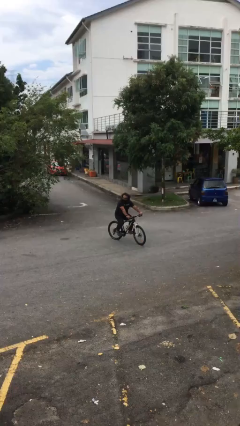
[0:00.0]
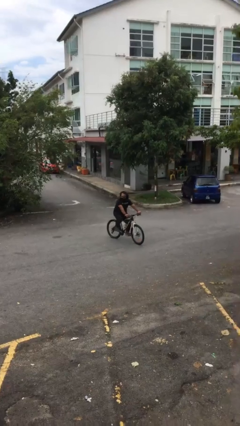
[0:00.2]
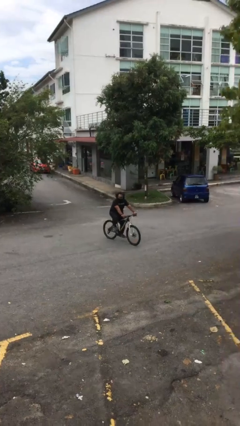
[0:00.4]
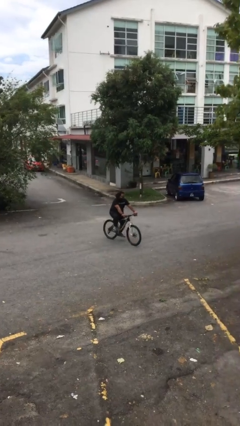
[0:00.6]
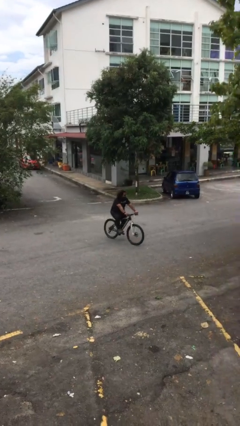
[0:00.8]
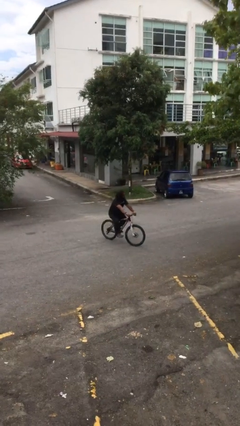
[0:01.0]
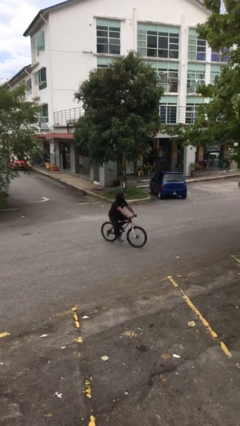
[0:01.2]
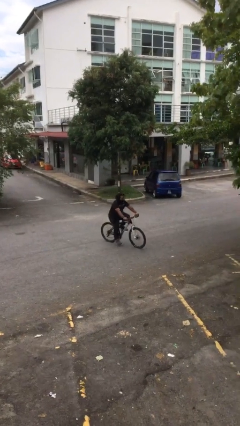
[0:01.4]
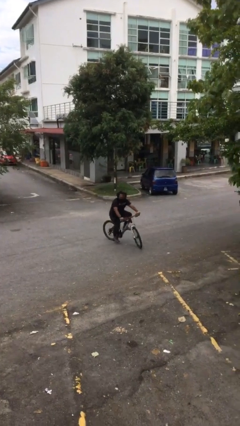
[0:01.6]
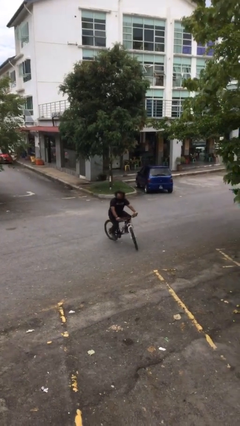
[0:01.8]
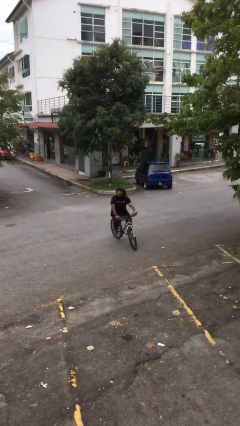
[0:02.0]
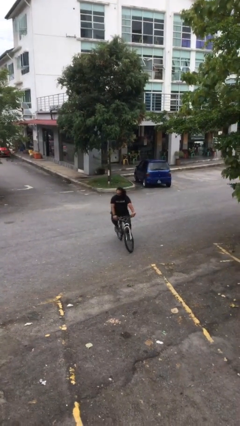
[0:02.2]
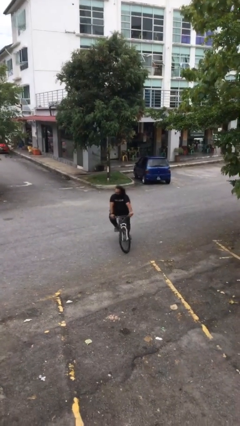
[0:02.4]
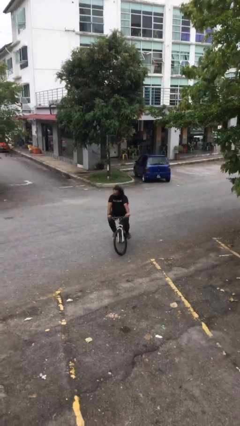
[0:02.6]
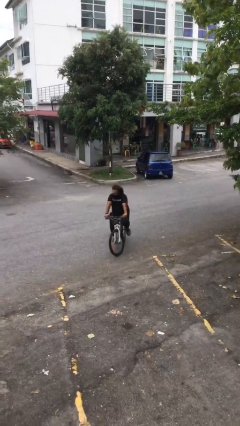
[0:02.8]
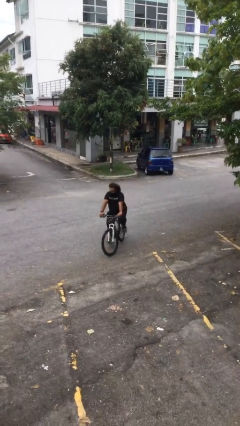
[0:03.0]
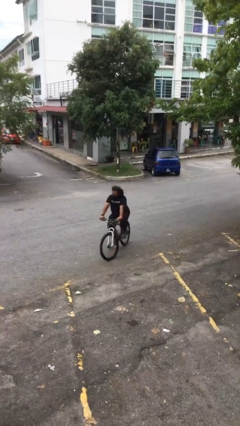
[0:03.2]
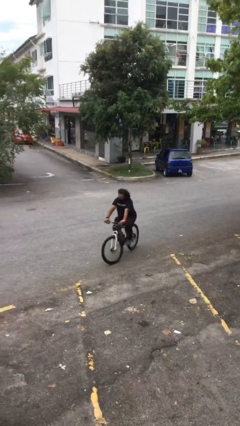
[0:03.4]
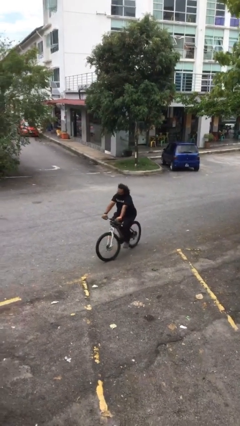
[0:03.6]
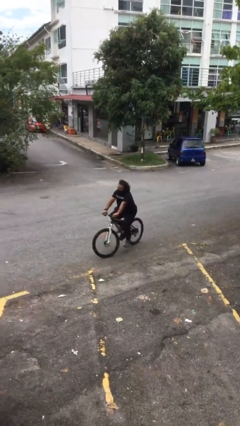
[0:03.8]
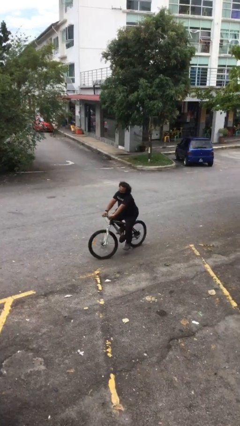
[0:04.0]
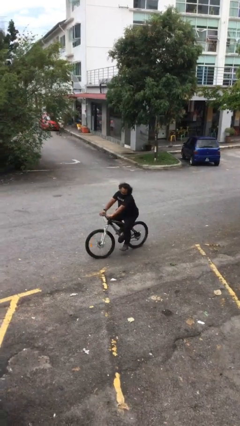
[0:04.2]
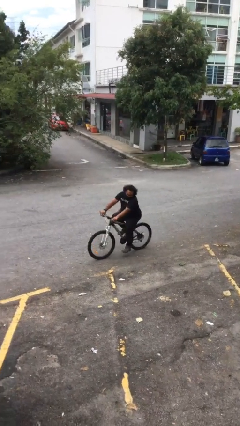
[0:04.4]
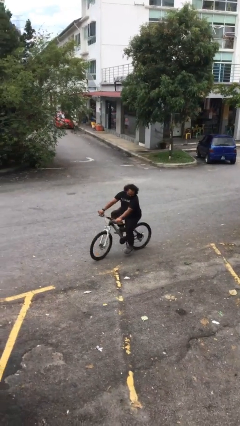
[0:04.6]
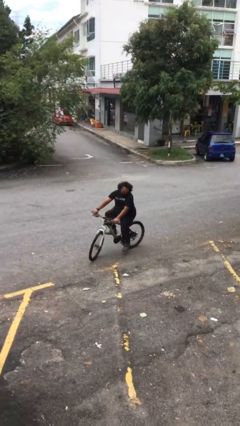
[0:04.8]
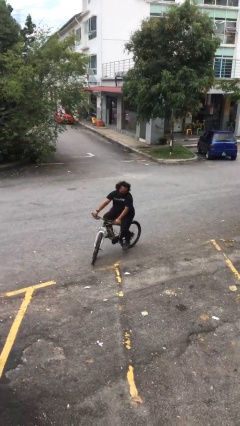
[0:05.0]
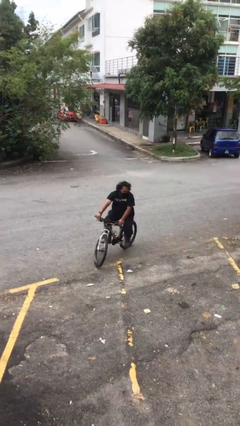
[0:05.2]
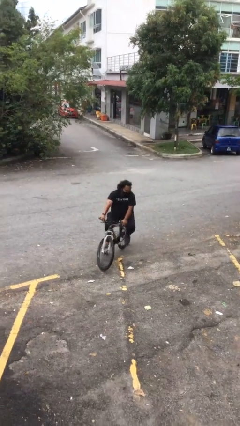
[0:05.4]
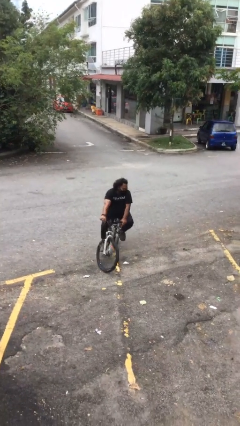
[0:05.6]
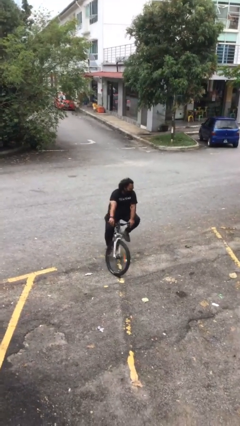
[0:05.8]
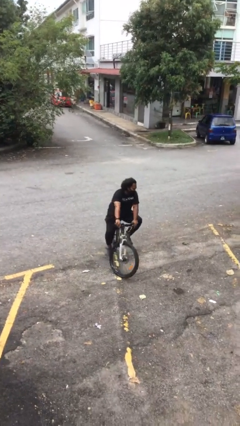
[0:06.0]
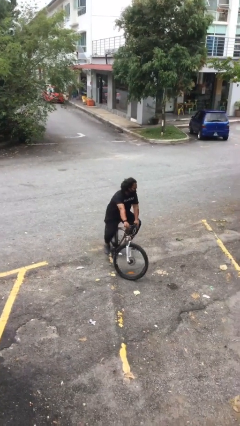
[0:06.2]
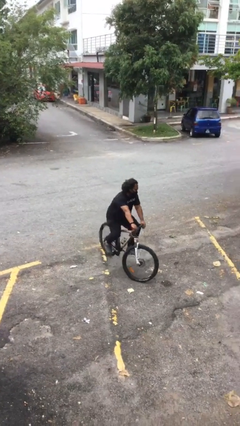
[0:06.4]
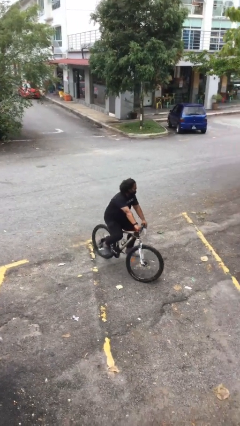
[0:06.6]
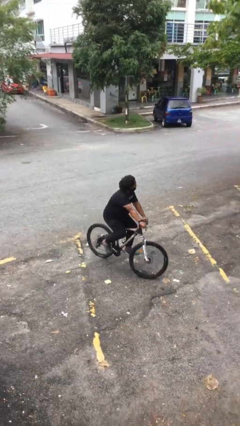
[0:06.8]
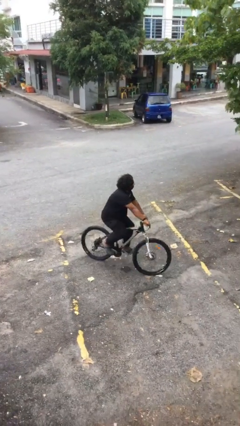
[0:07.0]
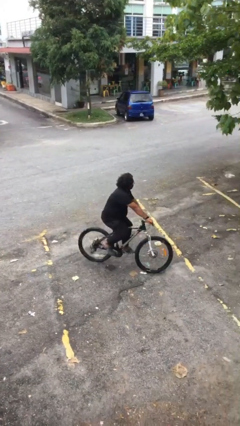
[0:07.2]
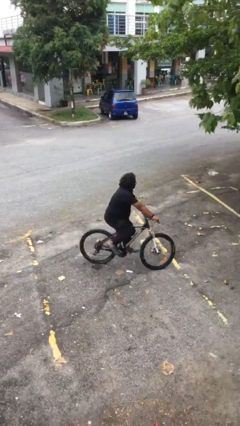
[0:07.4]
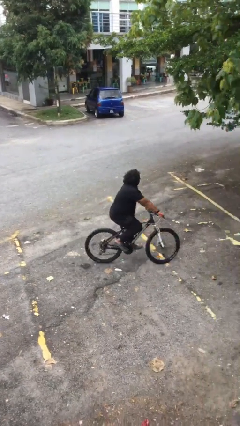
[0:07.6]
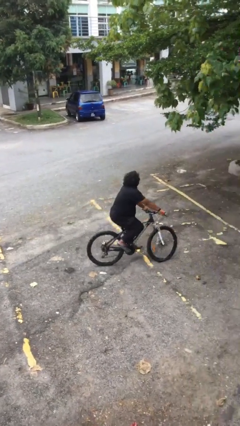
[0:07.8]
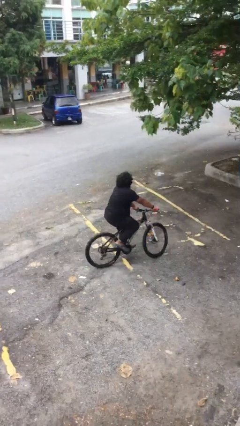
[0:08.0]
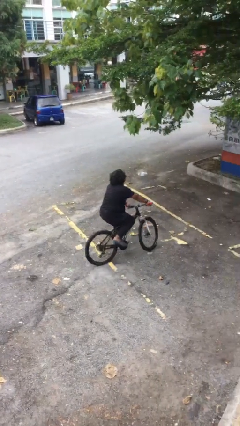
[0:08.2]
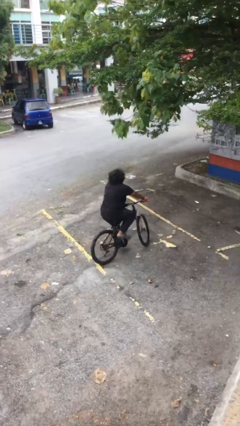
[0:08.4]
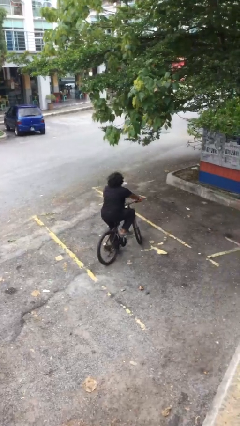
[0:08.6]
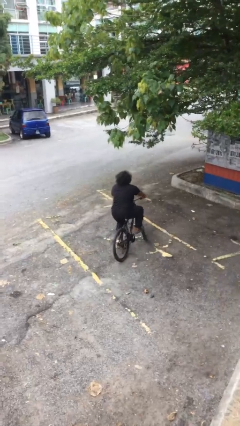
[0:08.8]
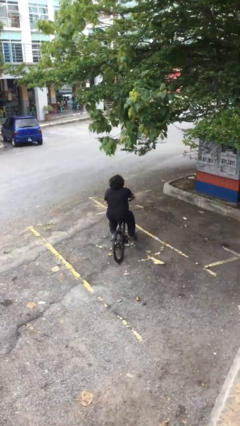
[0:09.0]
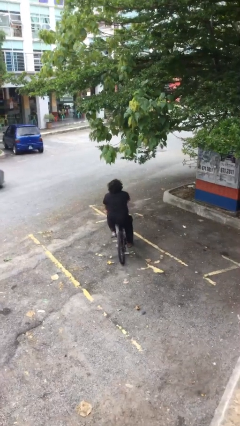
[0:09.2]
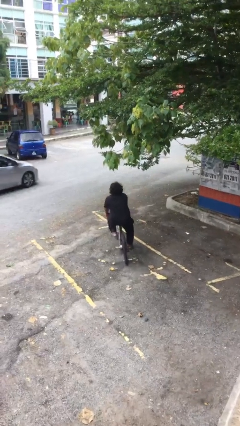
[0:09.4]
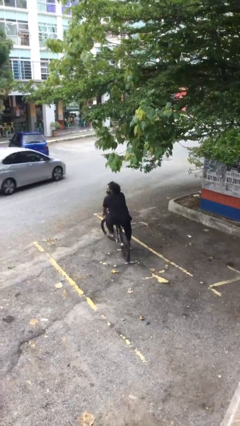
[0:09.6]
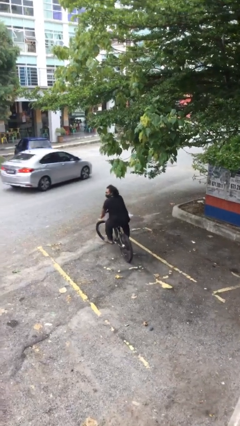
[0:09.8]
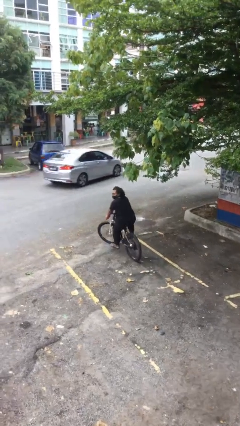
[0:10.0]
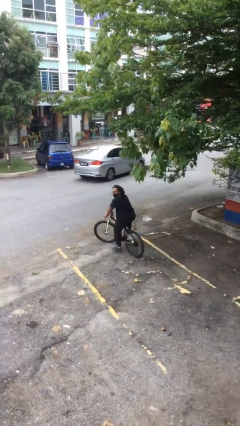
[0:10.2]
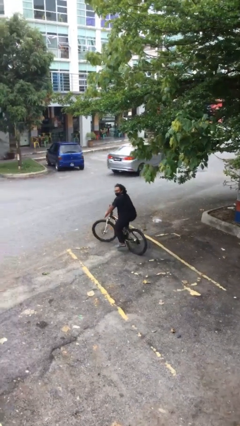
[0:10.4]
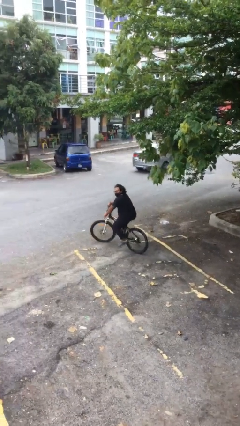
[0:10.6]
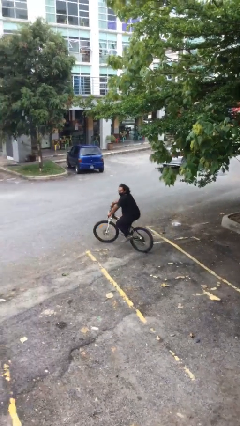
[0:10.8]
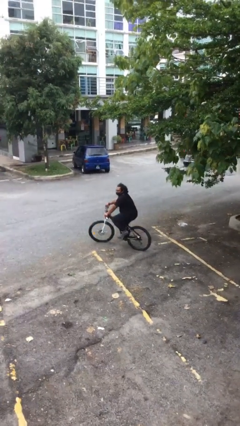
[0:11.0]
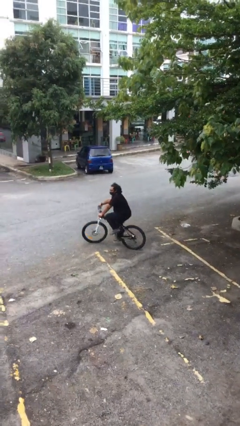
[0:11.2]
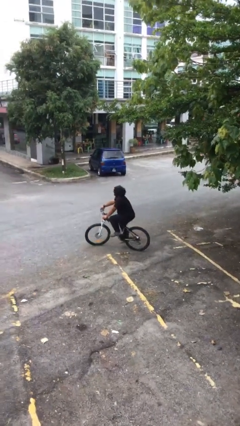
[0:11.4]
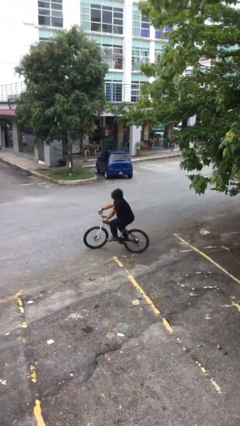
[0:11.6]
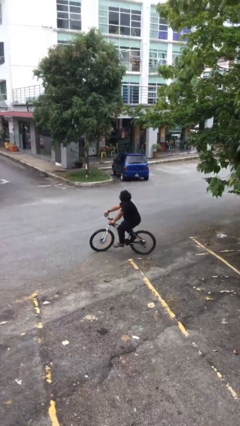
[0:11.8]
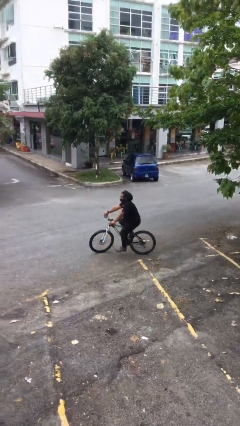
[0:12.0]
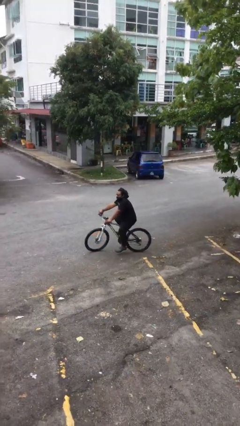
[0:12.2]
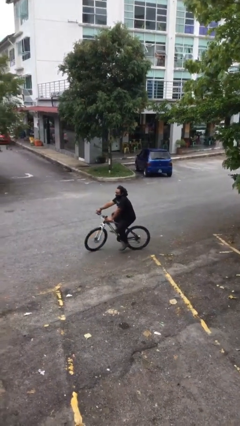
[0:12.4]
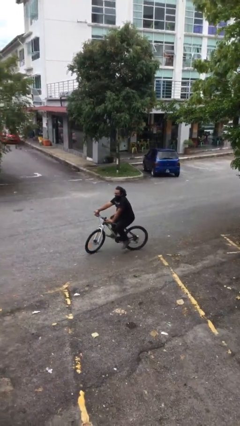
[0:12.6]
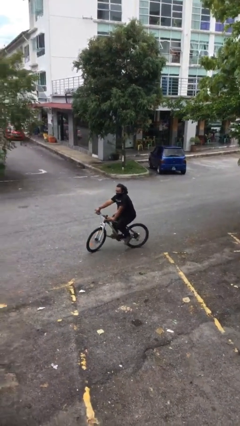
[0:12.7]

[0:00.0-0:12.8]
person rides bicycle

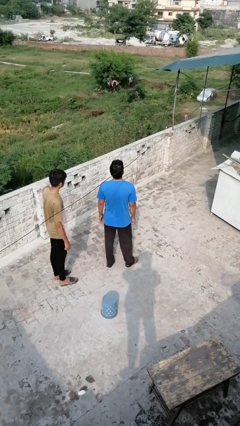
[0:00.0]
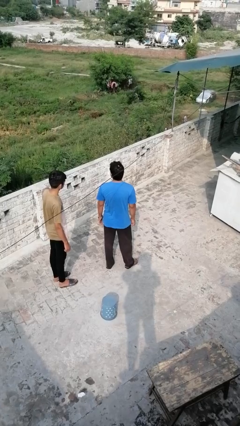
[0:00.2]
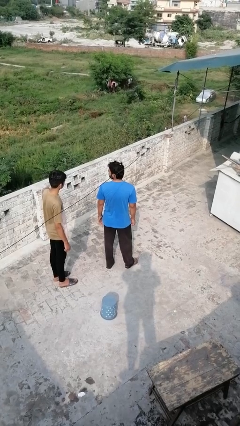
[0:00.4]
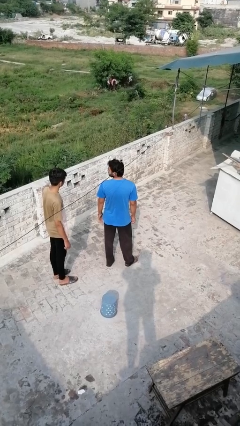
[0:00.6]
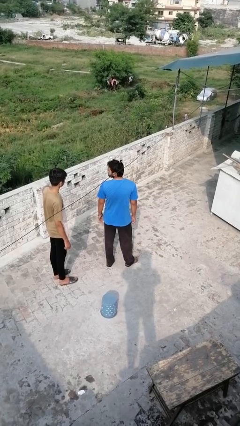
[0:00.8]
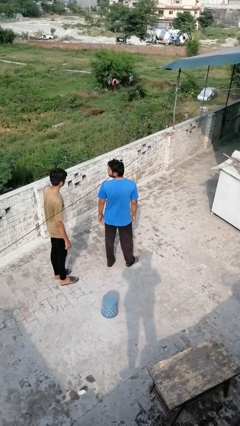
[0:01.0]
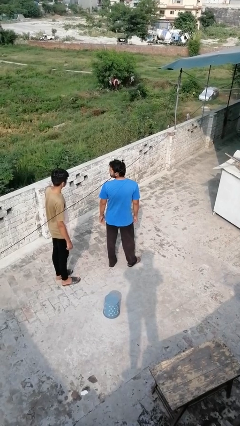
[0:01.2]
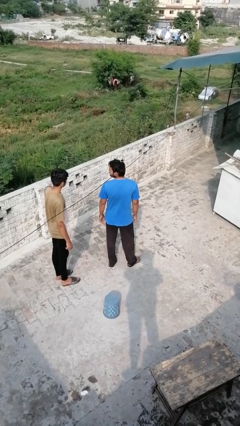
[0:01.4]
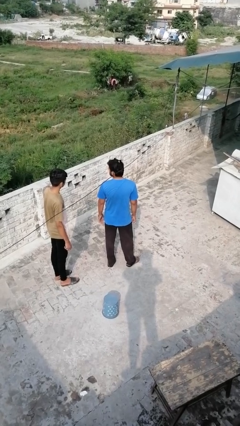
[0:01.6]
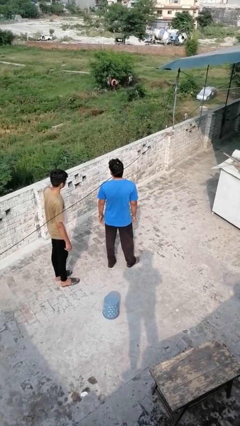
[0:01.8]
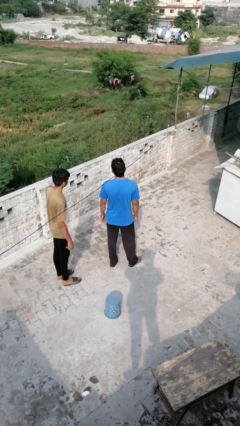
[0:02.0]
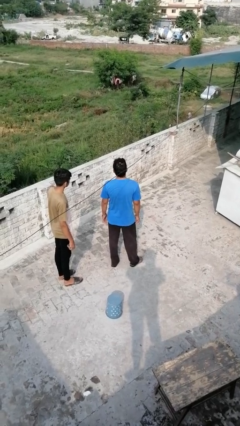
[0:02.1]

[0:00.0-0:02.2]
person looks over shoulder

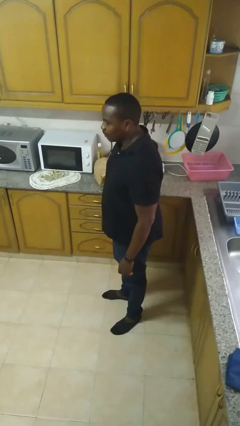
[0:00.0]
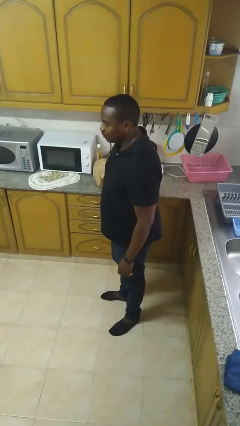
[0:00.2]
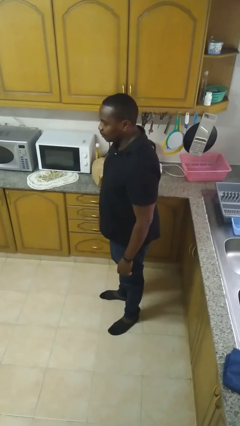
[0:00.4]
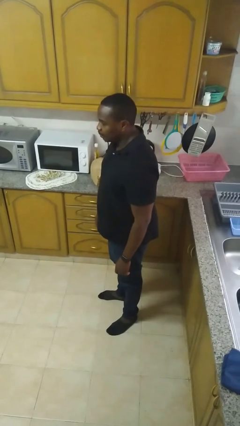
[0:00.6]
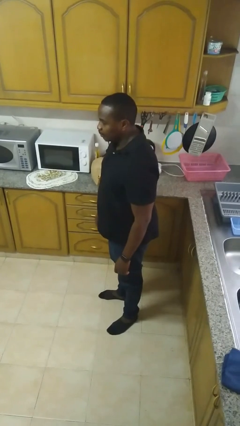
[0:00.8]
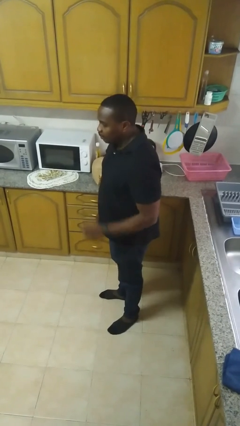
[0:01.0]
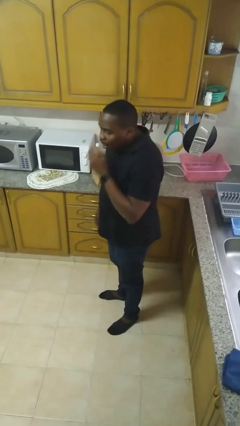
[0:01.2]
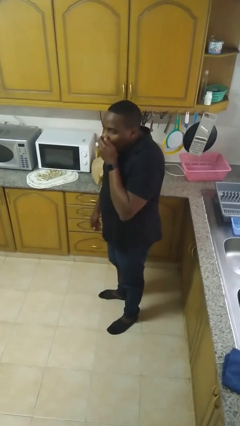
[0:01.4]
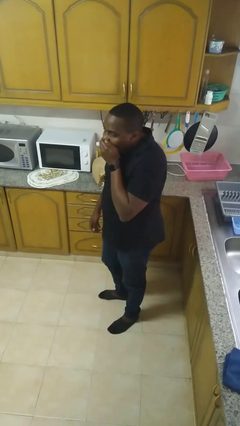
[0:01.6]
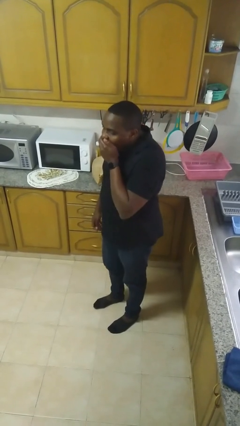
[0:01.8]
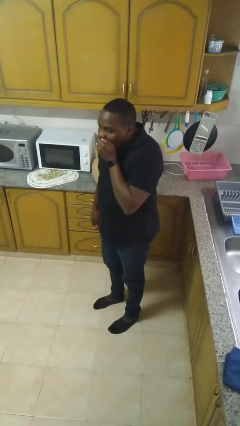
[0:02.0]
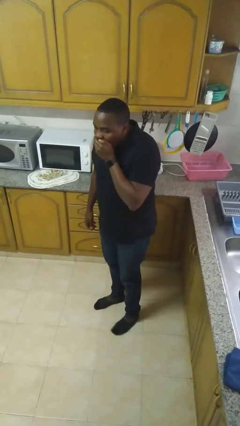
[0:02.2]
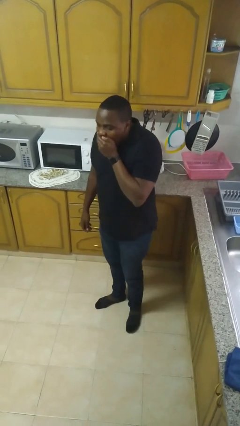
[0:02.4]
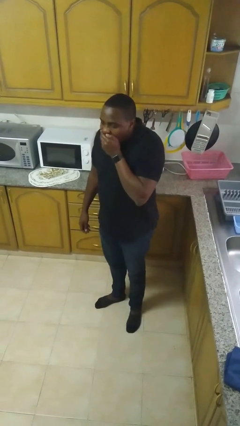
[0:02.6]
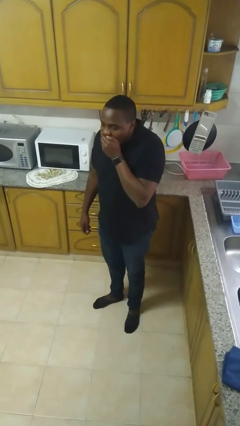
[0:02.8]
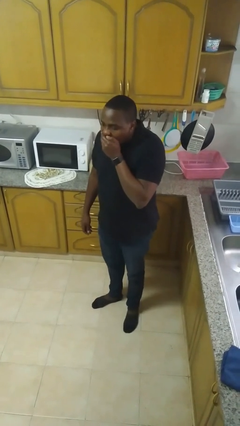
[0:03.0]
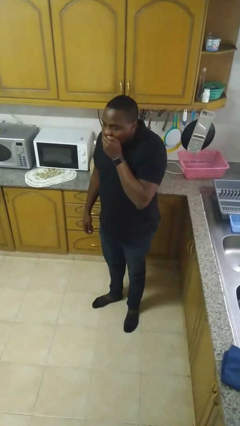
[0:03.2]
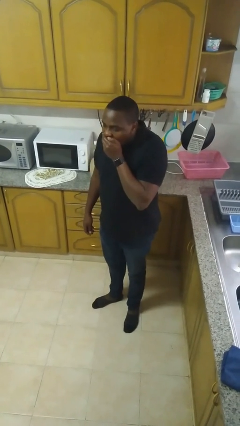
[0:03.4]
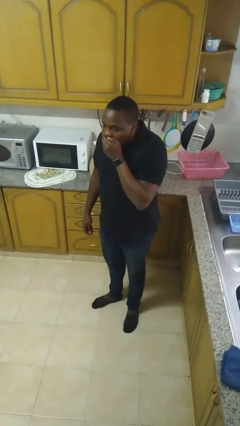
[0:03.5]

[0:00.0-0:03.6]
person yawns
